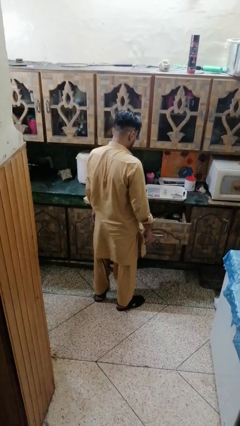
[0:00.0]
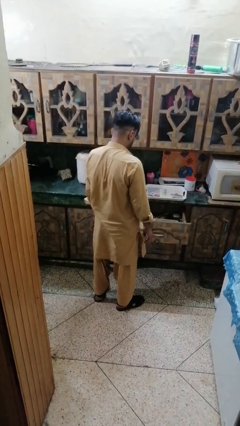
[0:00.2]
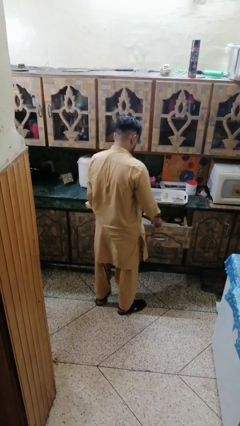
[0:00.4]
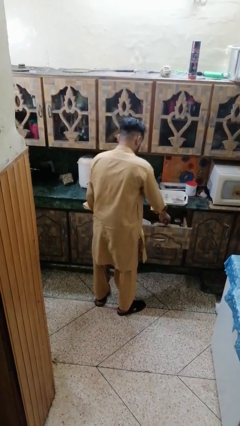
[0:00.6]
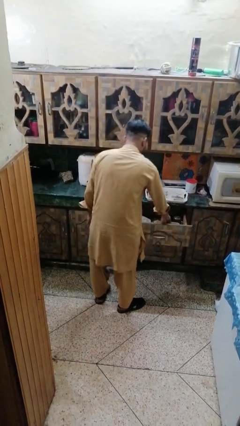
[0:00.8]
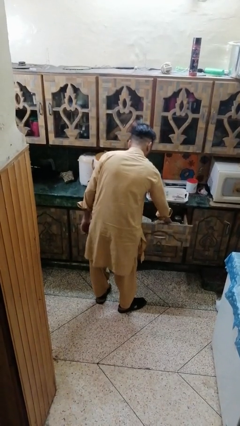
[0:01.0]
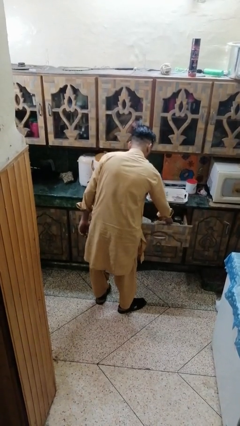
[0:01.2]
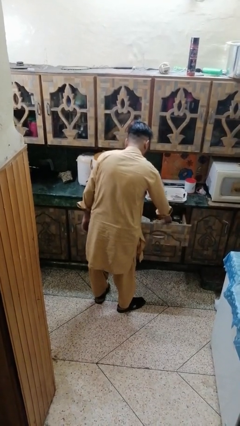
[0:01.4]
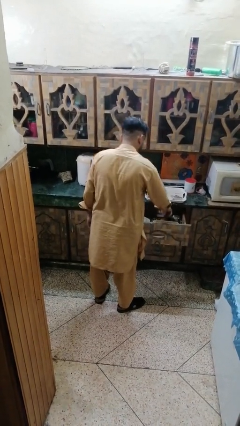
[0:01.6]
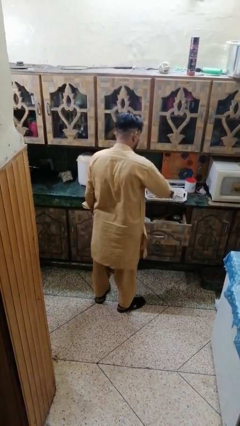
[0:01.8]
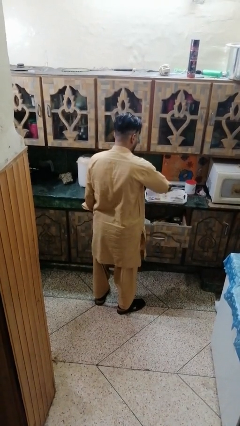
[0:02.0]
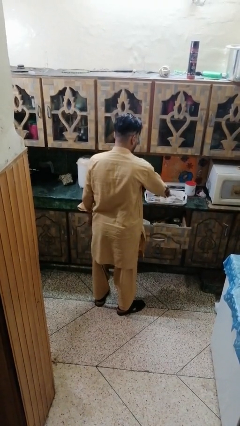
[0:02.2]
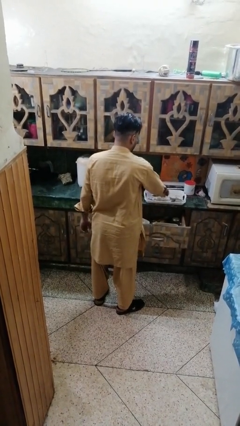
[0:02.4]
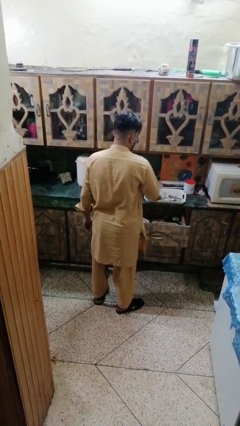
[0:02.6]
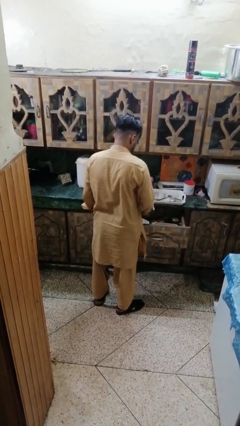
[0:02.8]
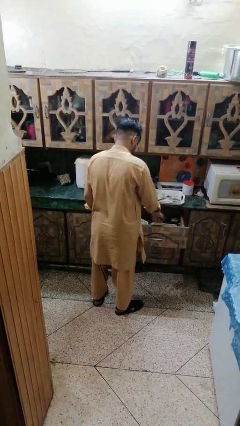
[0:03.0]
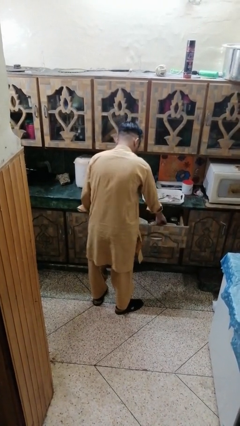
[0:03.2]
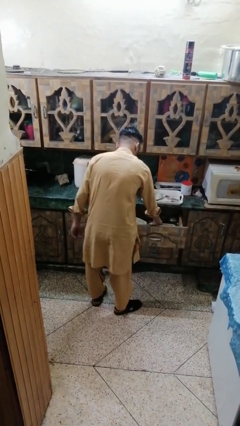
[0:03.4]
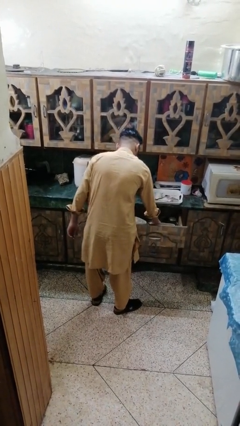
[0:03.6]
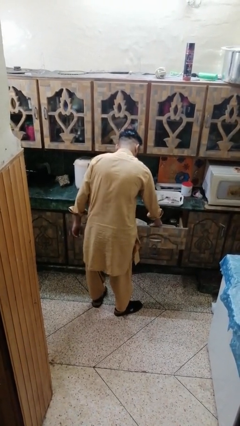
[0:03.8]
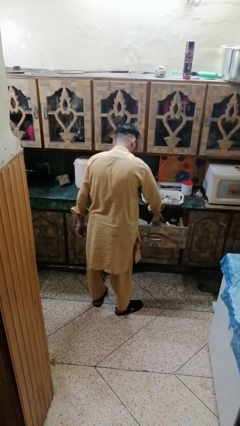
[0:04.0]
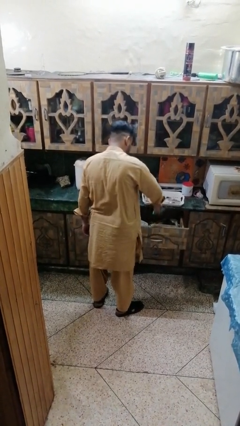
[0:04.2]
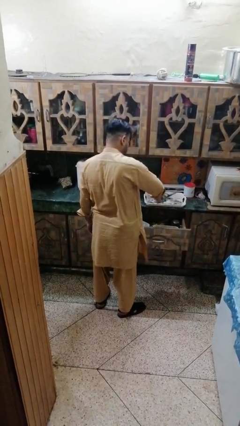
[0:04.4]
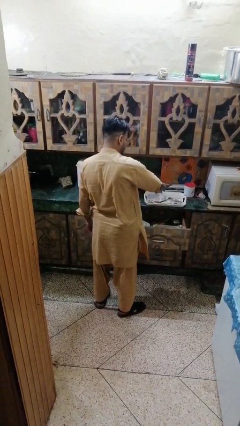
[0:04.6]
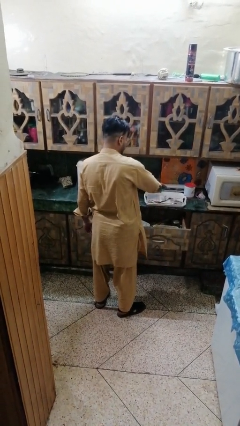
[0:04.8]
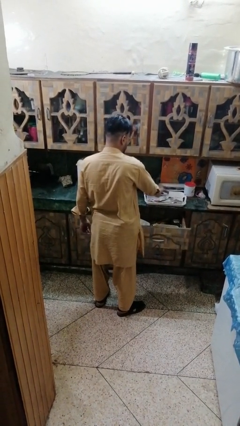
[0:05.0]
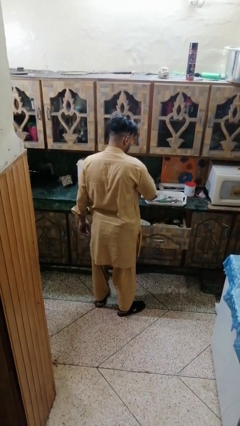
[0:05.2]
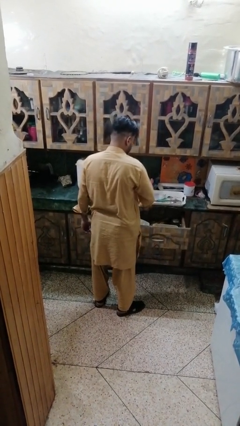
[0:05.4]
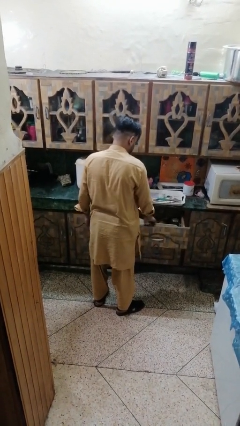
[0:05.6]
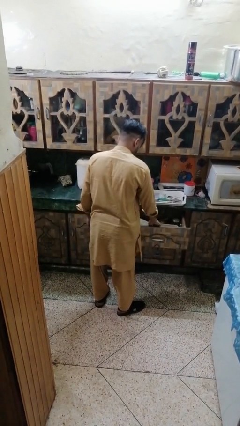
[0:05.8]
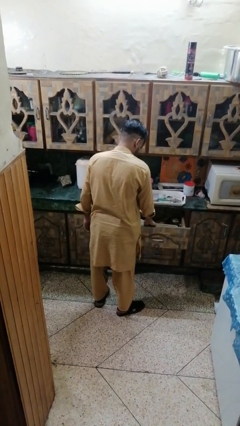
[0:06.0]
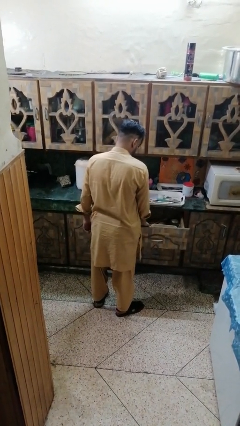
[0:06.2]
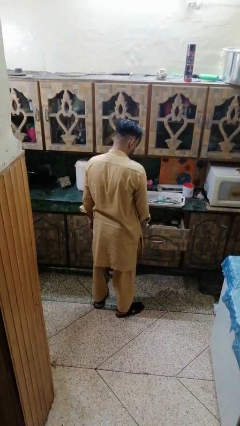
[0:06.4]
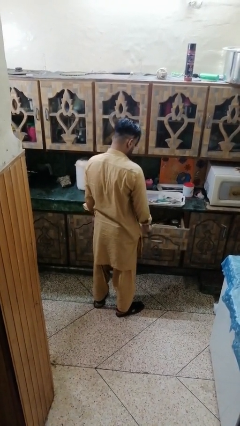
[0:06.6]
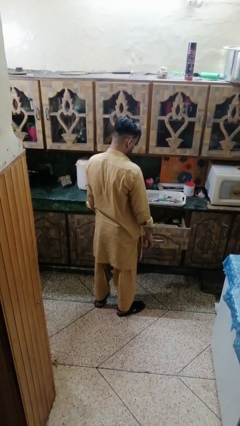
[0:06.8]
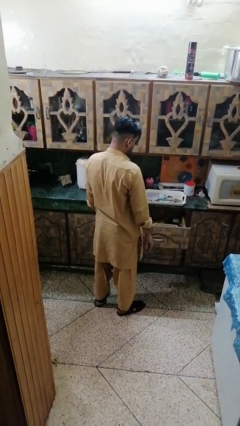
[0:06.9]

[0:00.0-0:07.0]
person takes object from kitchen drawer

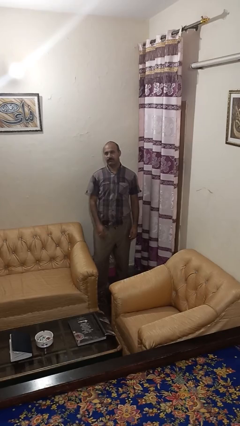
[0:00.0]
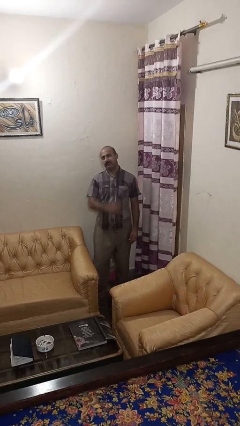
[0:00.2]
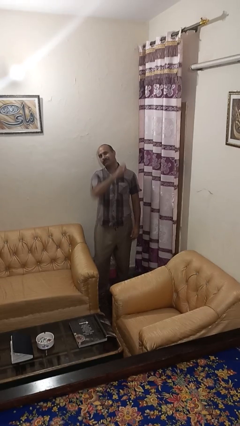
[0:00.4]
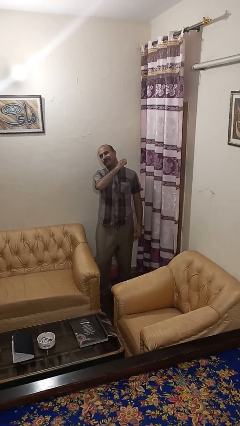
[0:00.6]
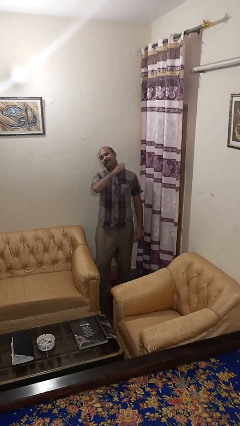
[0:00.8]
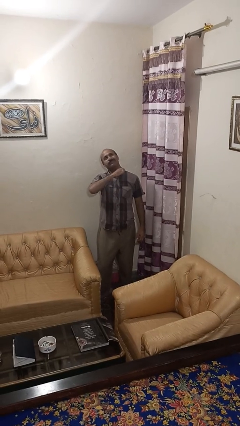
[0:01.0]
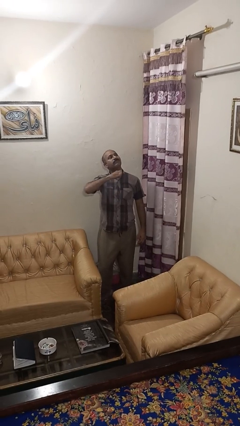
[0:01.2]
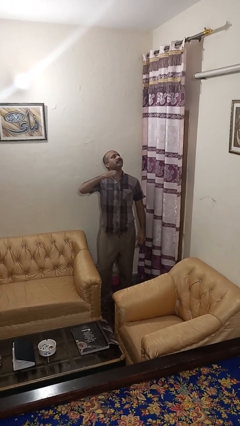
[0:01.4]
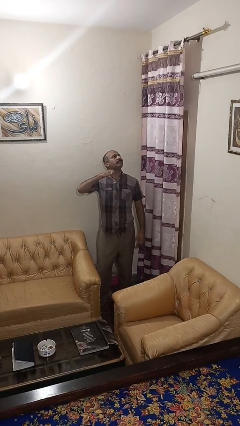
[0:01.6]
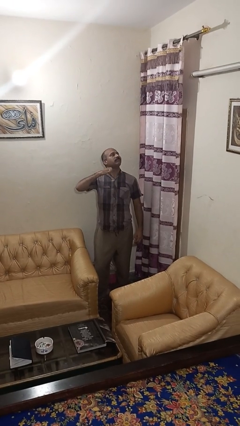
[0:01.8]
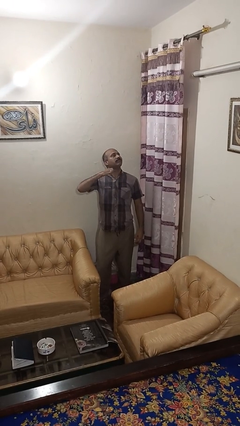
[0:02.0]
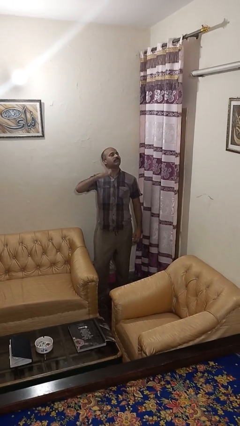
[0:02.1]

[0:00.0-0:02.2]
person gestures cut

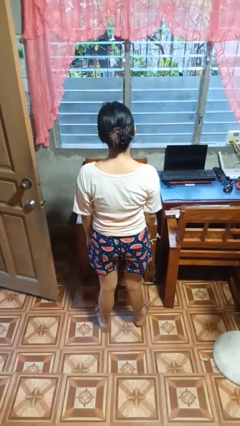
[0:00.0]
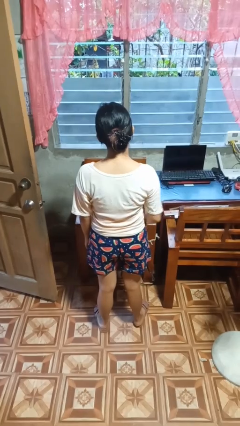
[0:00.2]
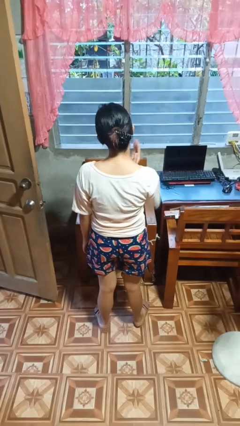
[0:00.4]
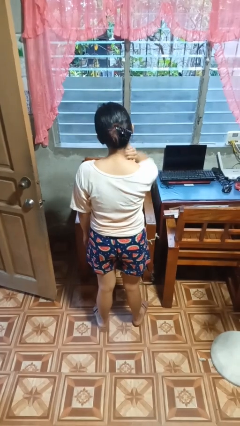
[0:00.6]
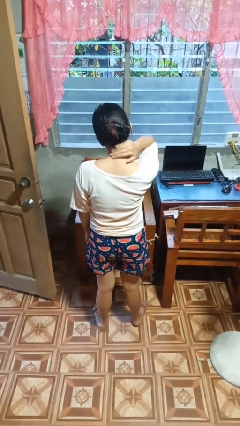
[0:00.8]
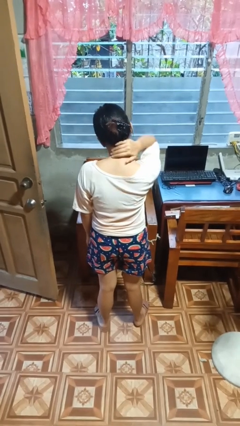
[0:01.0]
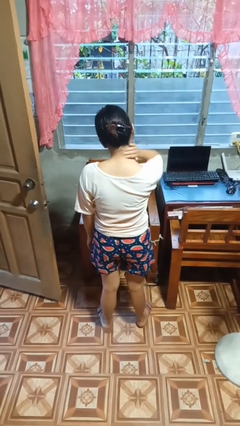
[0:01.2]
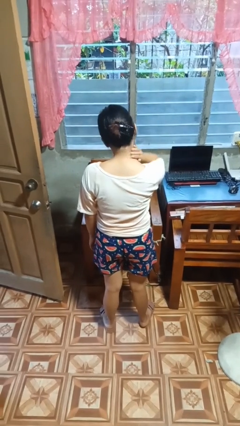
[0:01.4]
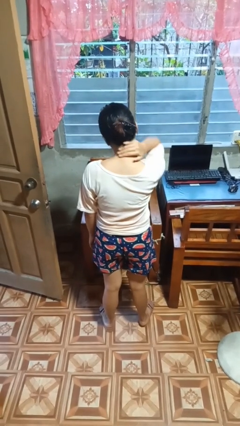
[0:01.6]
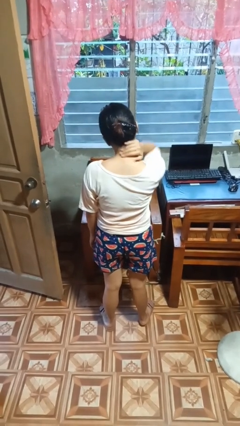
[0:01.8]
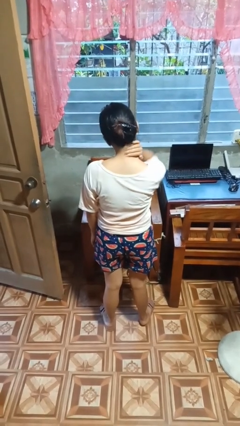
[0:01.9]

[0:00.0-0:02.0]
person rubs neck

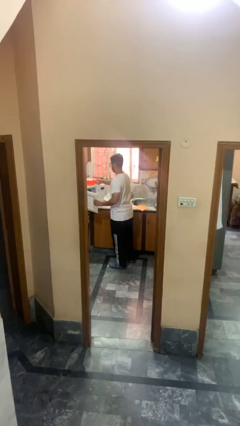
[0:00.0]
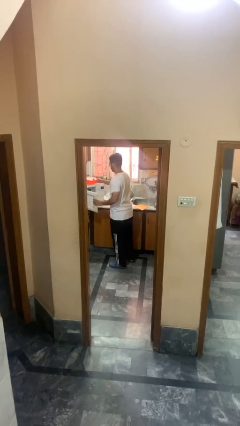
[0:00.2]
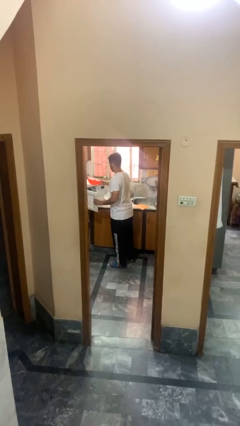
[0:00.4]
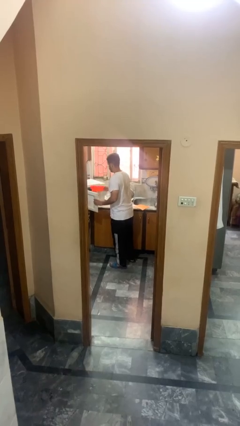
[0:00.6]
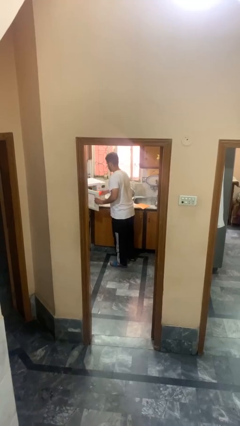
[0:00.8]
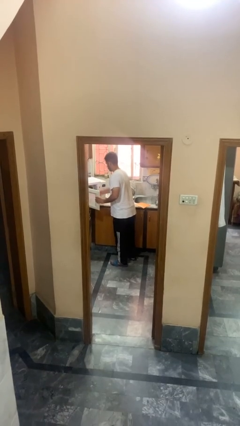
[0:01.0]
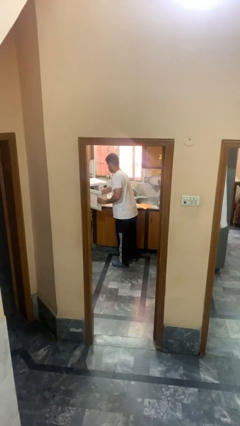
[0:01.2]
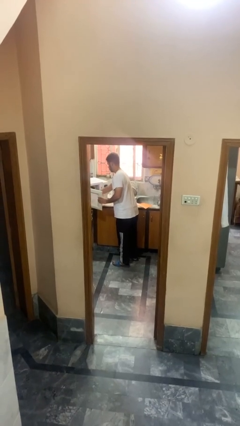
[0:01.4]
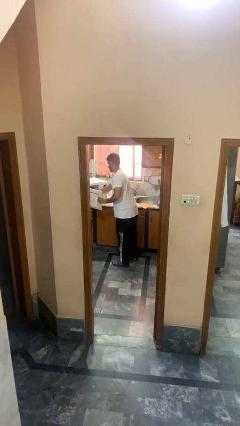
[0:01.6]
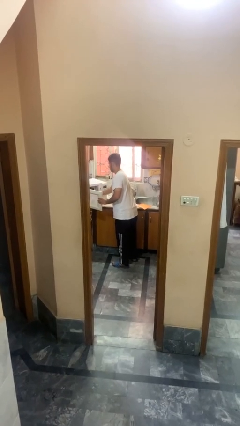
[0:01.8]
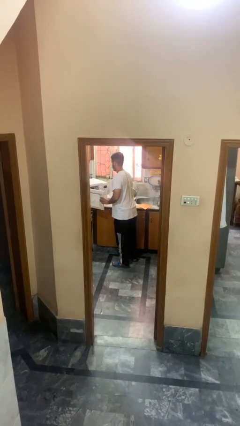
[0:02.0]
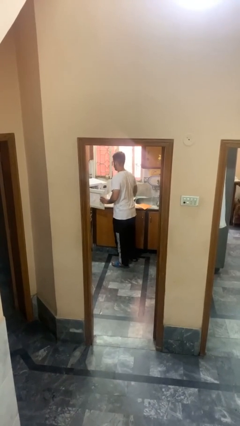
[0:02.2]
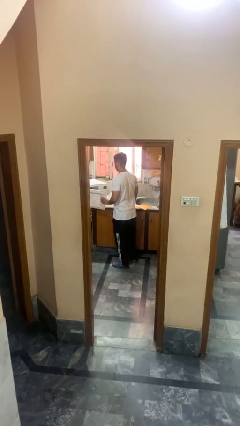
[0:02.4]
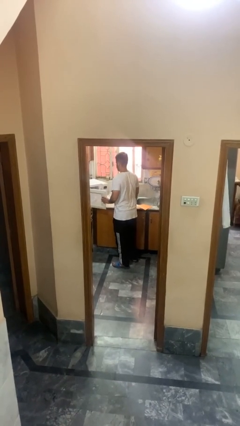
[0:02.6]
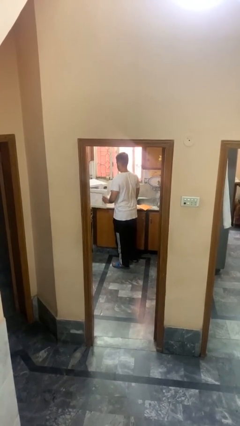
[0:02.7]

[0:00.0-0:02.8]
person puts object into microwave

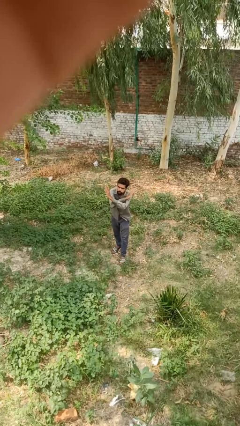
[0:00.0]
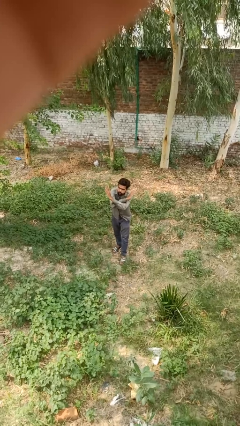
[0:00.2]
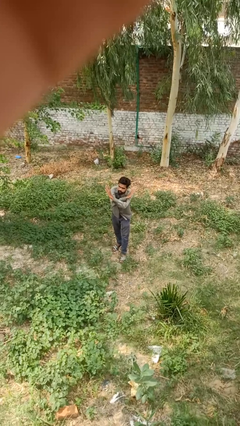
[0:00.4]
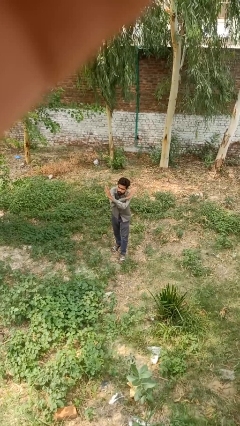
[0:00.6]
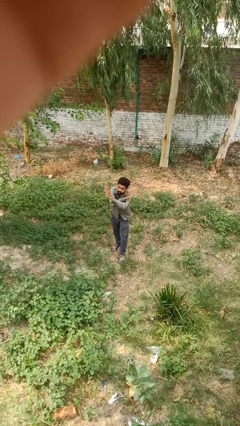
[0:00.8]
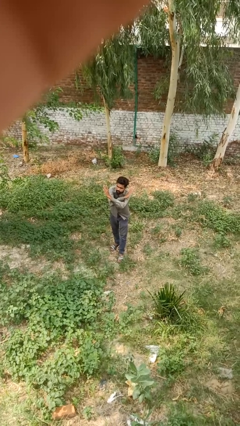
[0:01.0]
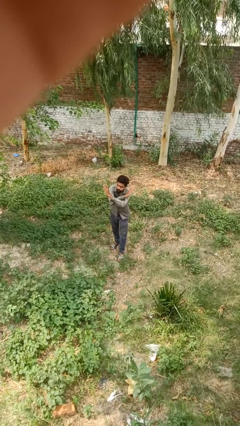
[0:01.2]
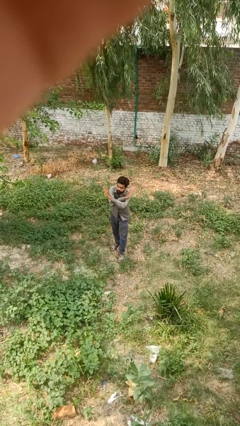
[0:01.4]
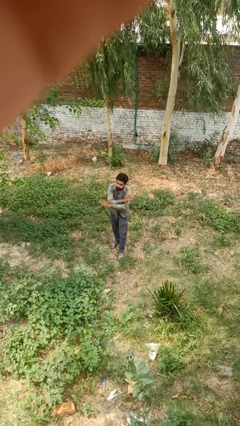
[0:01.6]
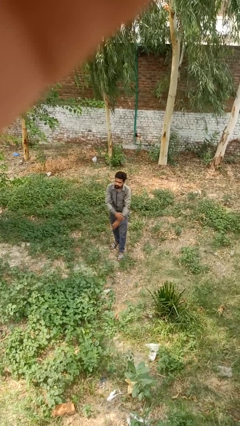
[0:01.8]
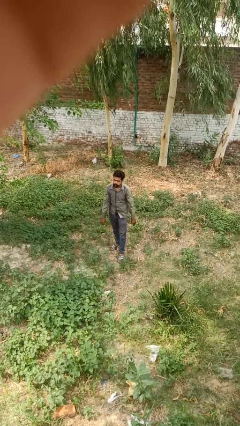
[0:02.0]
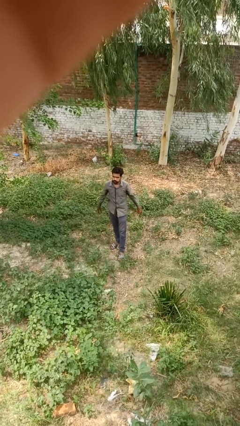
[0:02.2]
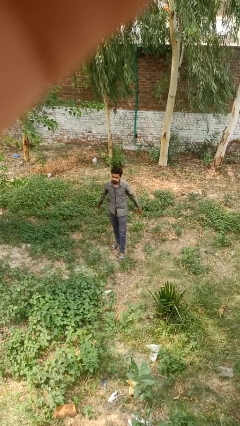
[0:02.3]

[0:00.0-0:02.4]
person crosses arms

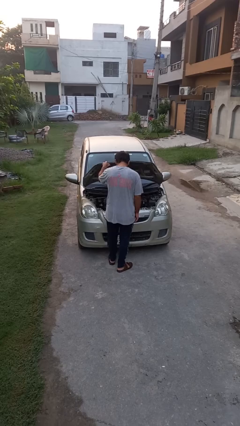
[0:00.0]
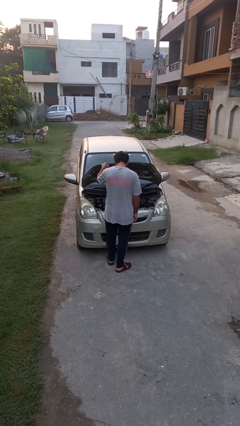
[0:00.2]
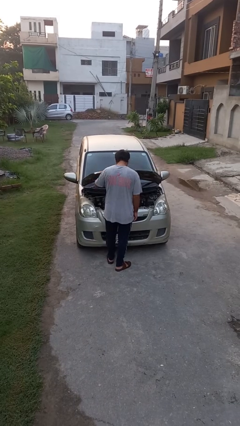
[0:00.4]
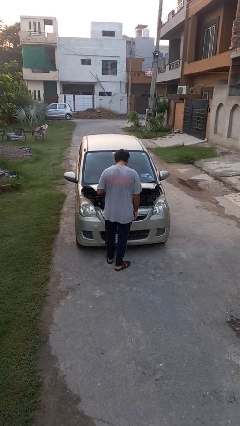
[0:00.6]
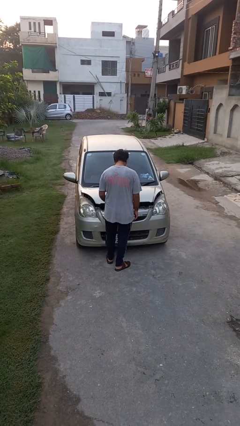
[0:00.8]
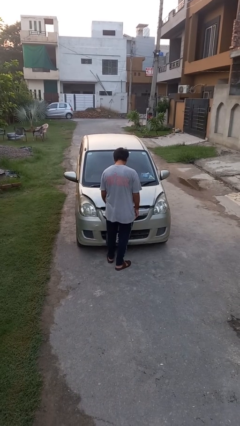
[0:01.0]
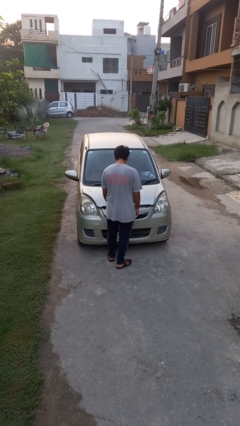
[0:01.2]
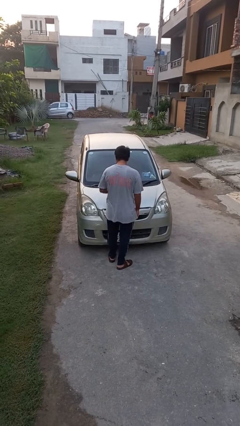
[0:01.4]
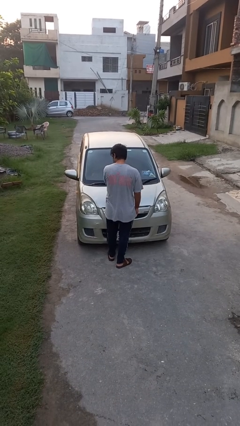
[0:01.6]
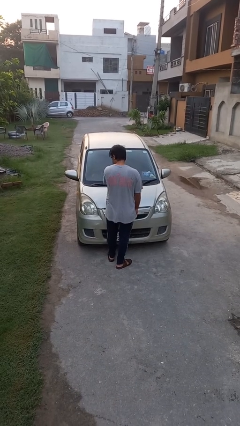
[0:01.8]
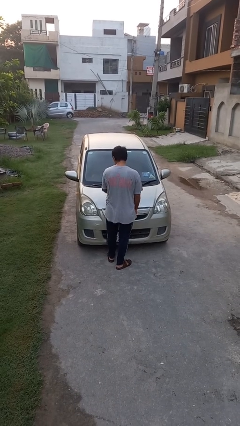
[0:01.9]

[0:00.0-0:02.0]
person closes car hood
